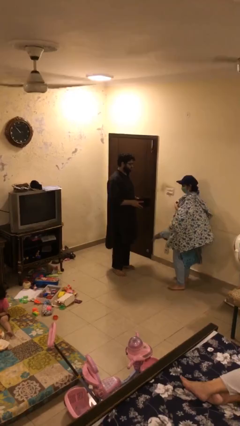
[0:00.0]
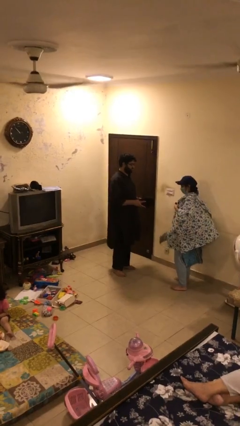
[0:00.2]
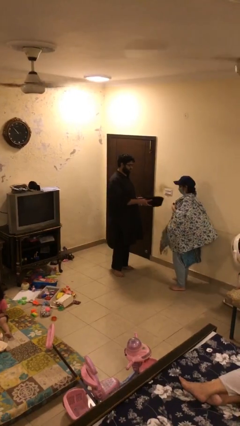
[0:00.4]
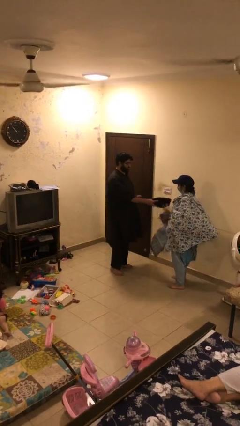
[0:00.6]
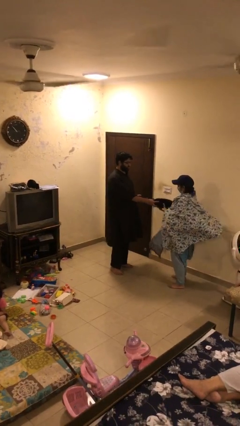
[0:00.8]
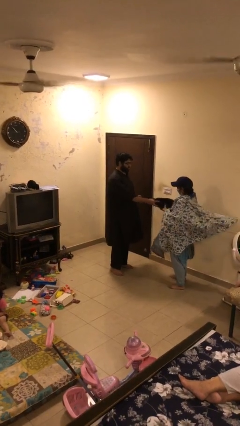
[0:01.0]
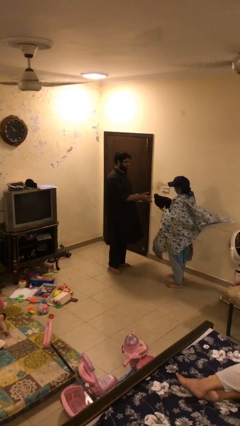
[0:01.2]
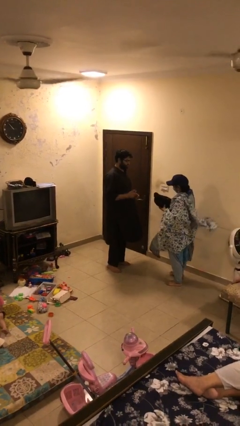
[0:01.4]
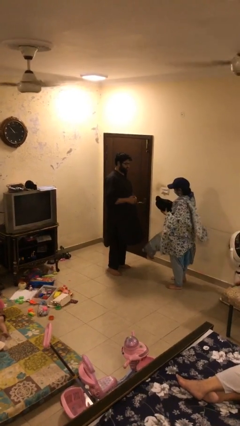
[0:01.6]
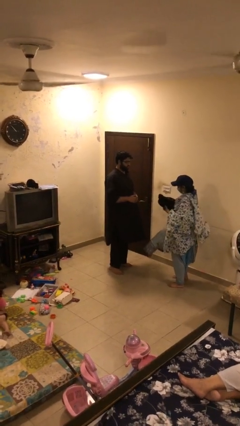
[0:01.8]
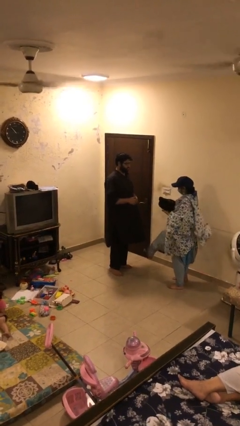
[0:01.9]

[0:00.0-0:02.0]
person transfers object to person

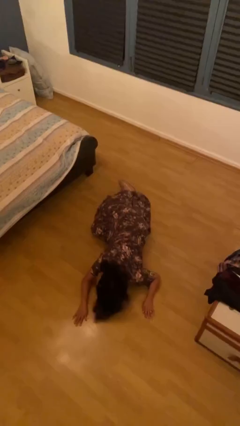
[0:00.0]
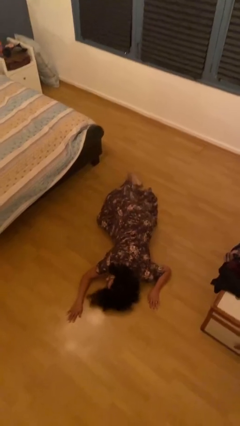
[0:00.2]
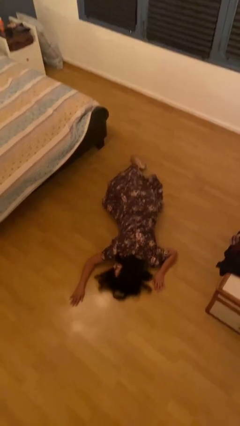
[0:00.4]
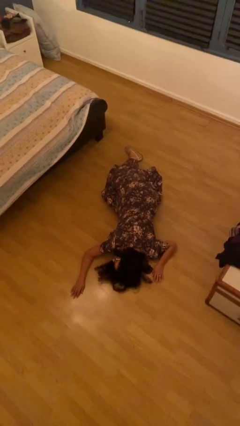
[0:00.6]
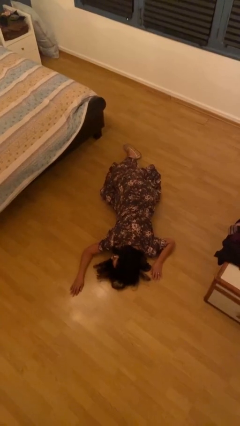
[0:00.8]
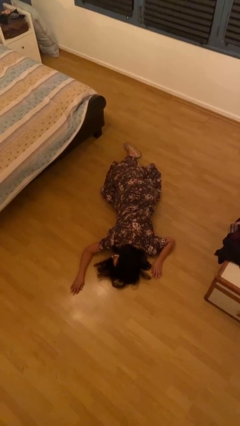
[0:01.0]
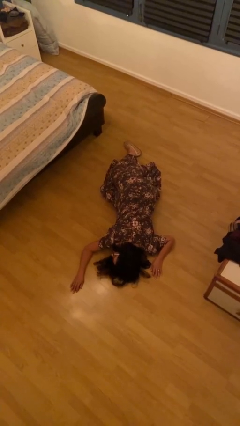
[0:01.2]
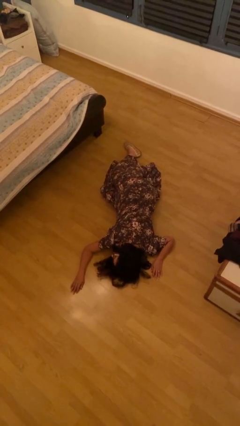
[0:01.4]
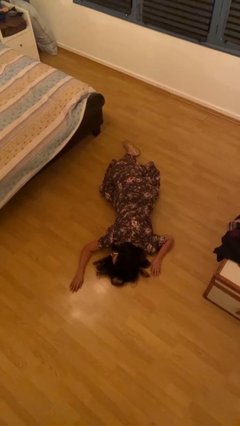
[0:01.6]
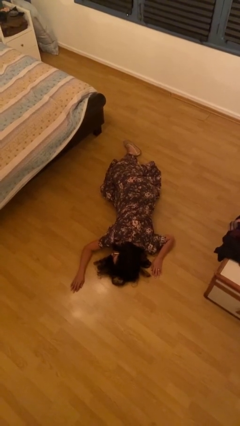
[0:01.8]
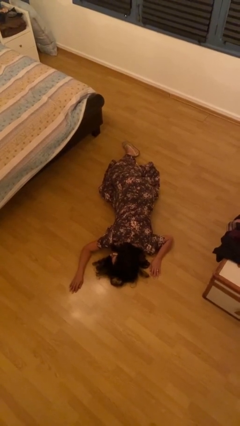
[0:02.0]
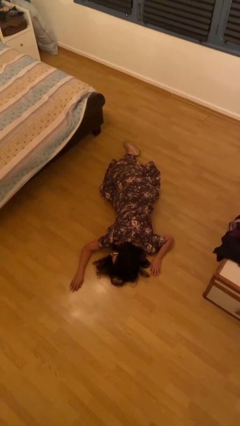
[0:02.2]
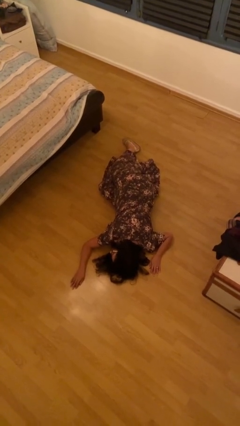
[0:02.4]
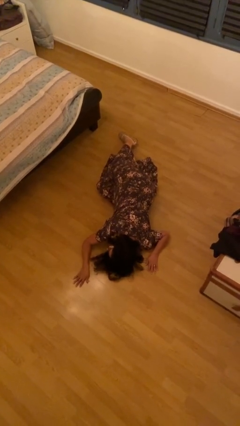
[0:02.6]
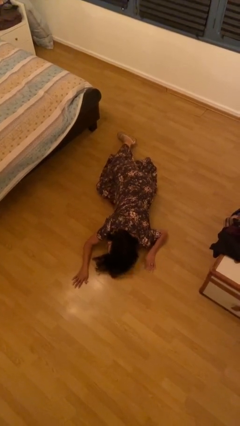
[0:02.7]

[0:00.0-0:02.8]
person lies down on floor

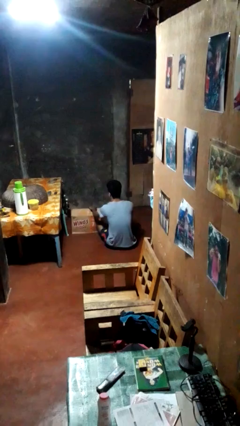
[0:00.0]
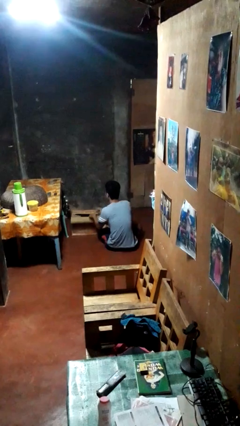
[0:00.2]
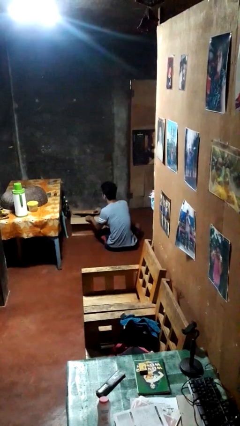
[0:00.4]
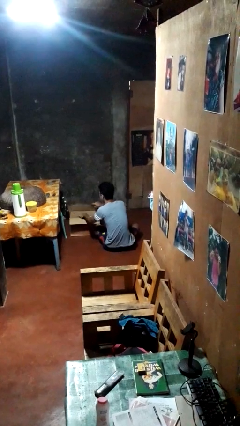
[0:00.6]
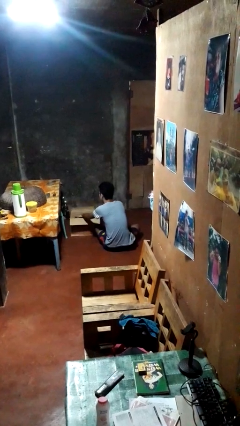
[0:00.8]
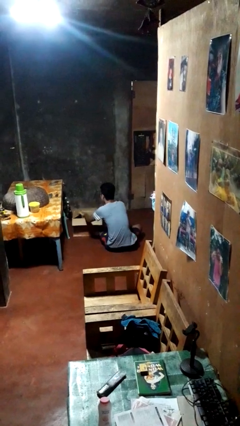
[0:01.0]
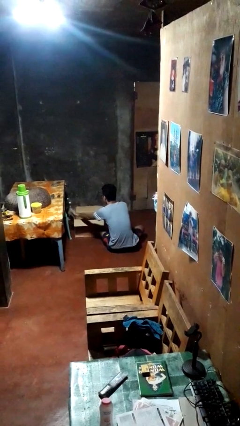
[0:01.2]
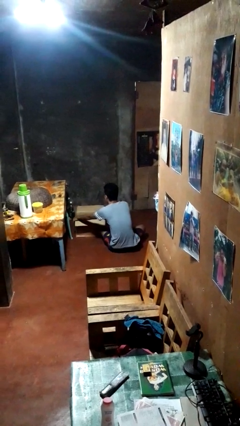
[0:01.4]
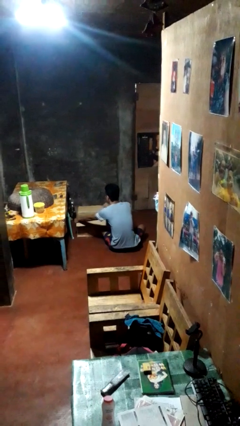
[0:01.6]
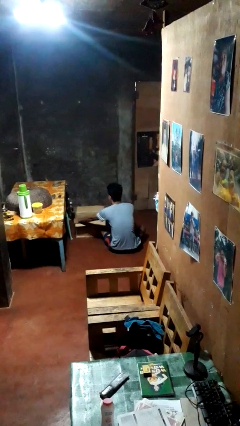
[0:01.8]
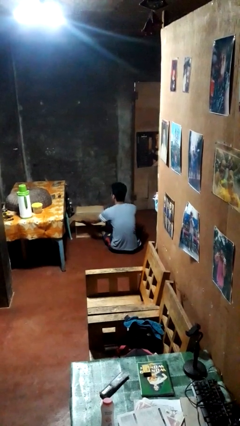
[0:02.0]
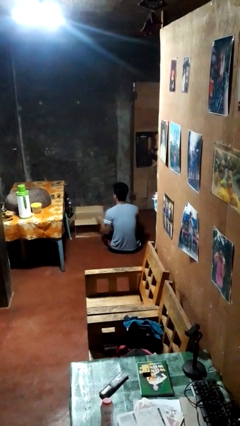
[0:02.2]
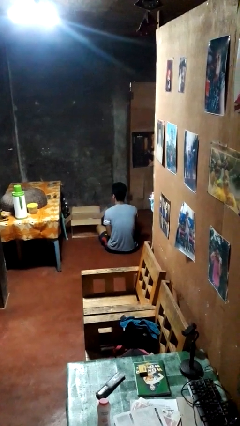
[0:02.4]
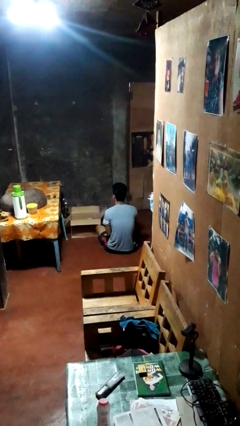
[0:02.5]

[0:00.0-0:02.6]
person opens box

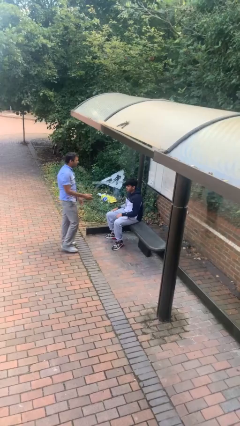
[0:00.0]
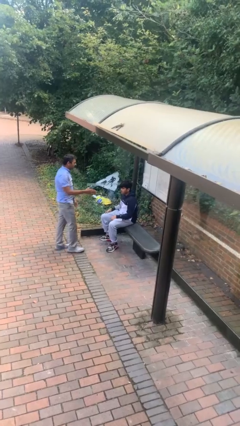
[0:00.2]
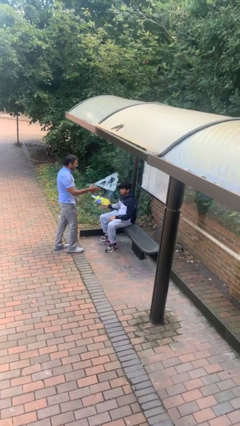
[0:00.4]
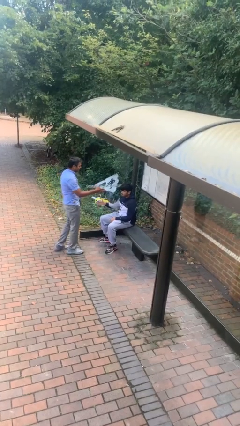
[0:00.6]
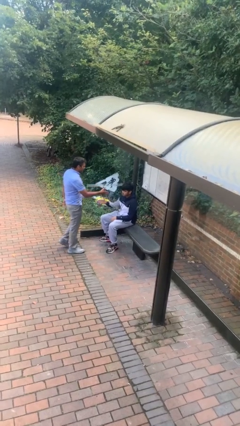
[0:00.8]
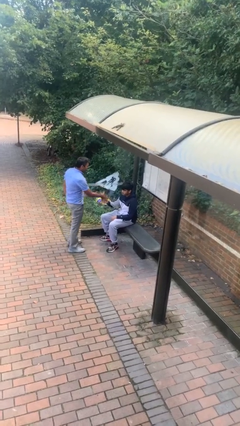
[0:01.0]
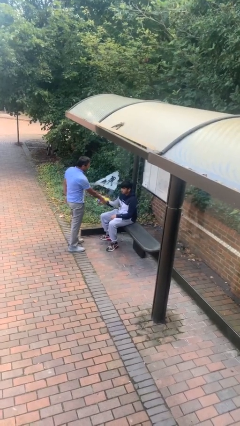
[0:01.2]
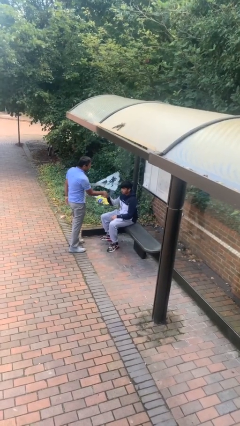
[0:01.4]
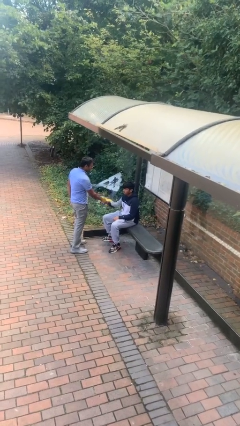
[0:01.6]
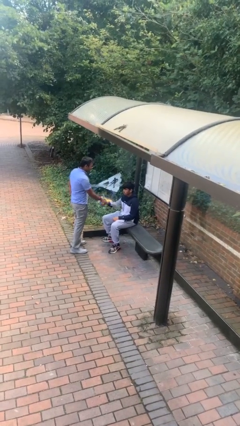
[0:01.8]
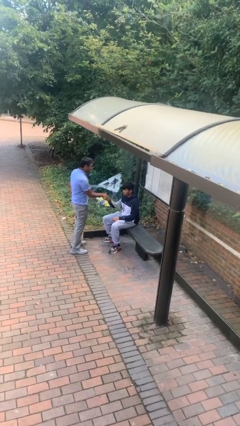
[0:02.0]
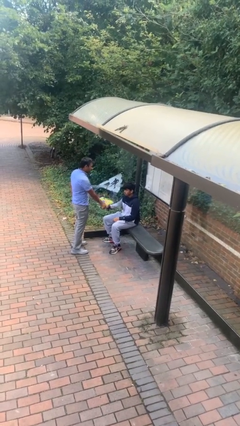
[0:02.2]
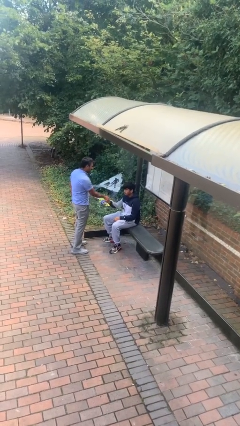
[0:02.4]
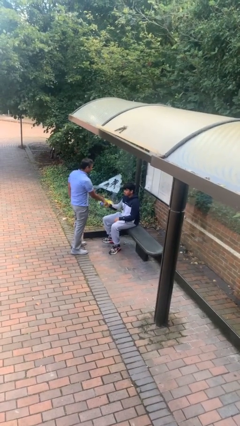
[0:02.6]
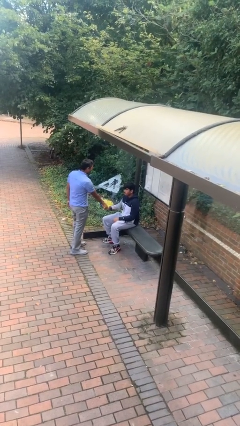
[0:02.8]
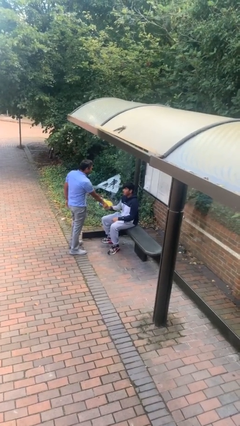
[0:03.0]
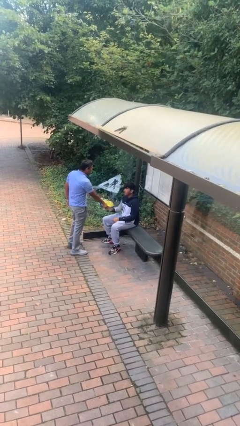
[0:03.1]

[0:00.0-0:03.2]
person shakes hand

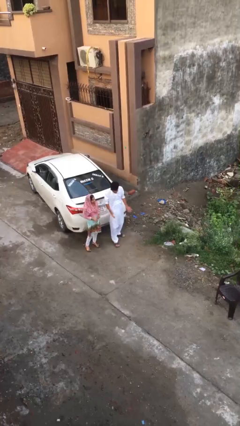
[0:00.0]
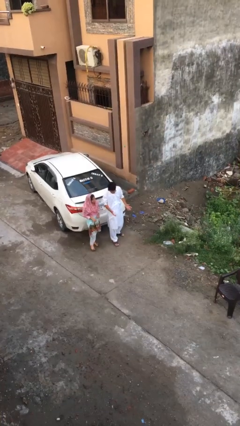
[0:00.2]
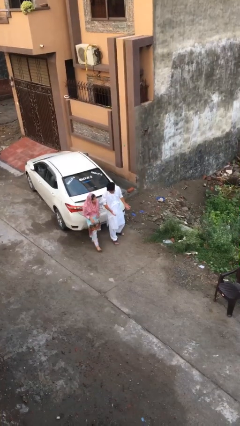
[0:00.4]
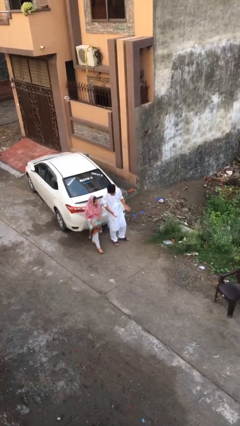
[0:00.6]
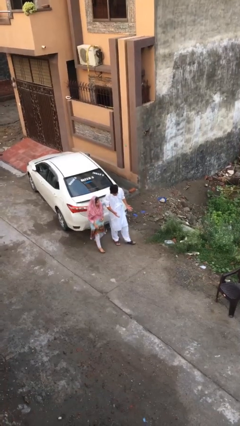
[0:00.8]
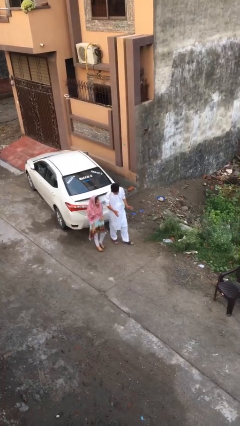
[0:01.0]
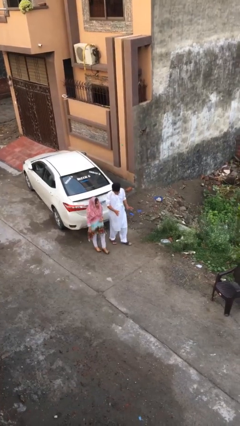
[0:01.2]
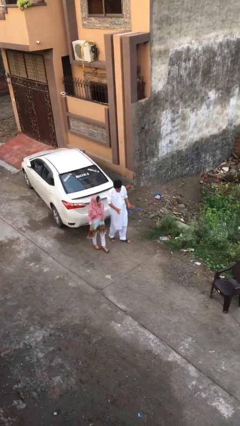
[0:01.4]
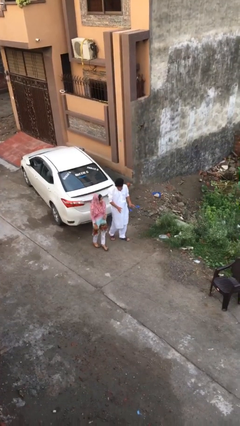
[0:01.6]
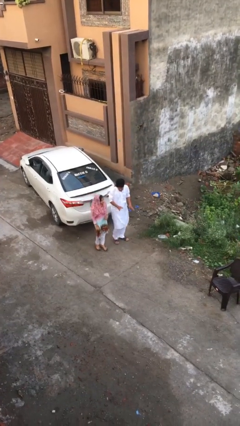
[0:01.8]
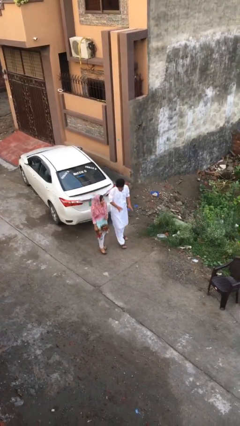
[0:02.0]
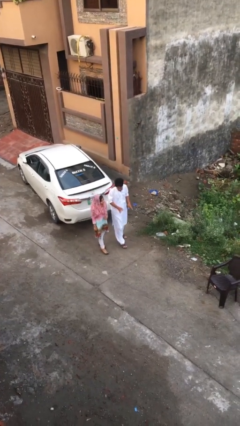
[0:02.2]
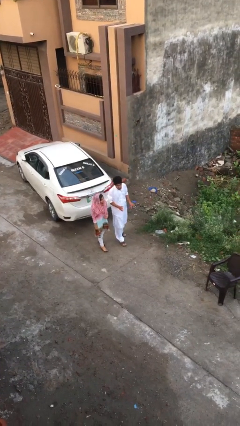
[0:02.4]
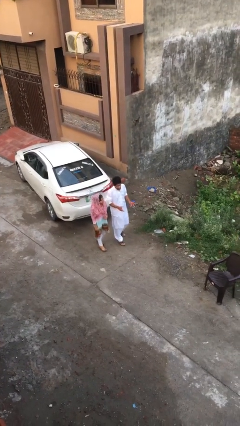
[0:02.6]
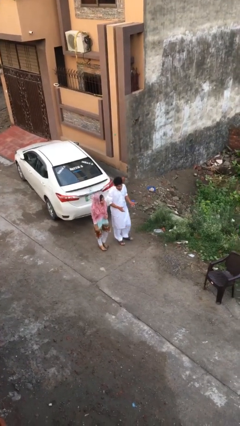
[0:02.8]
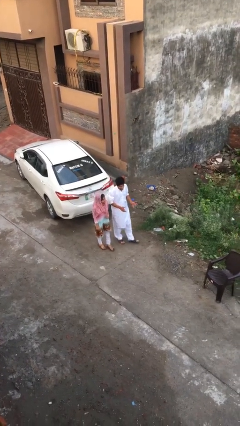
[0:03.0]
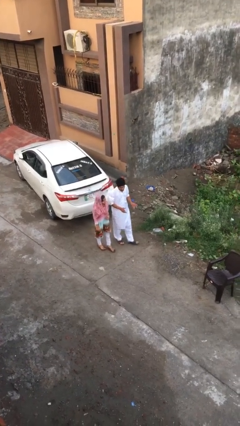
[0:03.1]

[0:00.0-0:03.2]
person talks to person

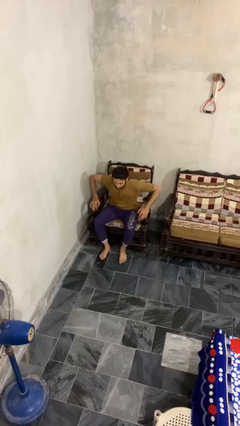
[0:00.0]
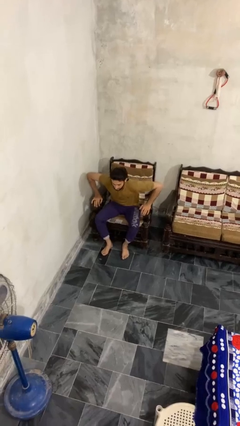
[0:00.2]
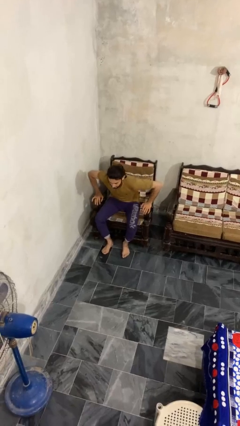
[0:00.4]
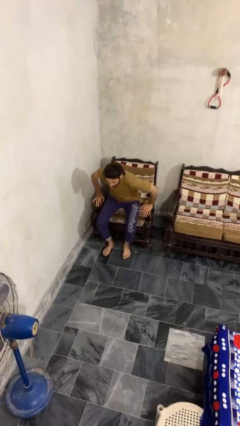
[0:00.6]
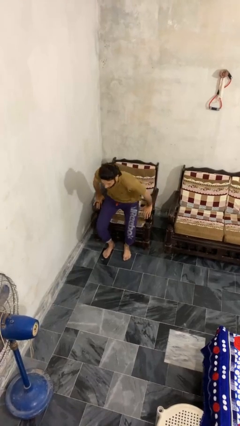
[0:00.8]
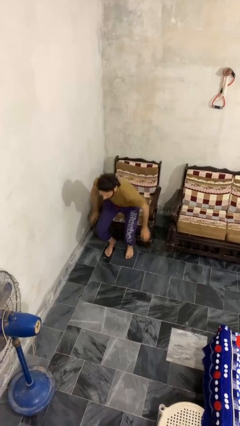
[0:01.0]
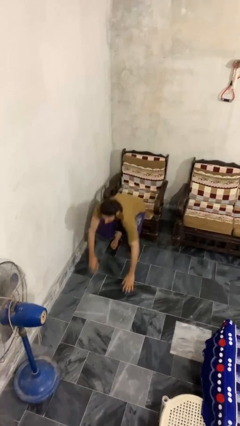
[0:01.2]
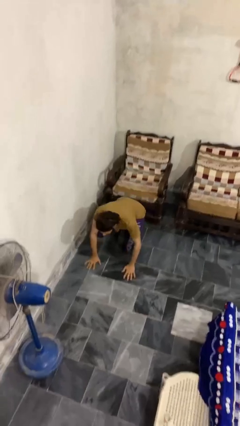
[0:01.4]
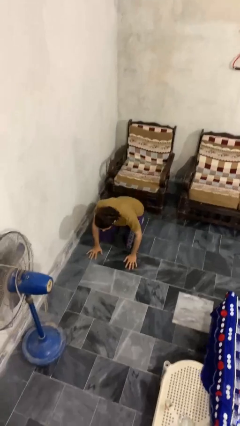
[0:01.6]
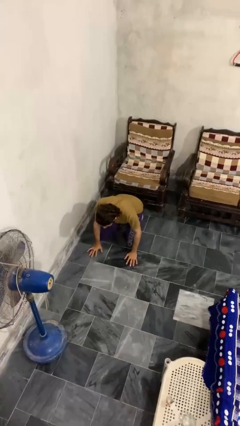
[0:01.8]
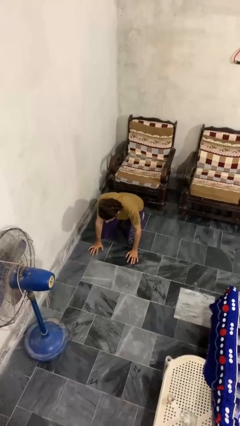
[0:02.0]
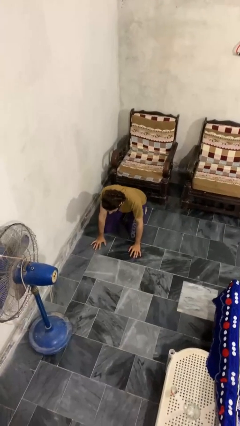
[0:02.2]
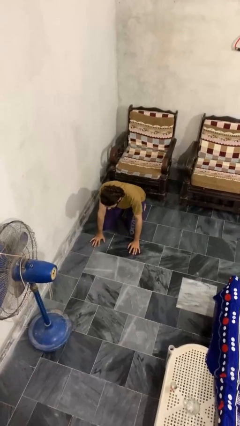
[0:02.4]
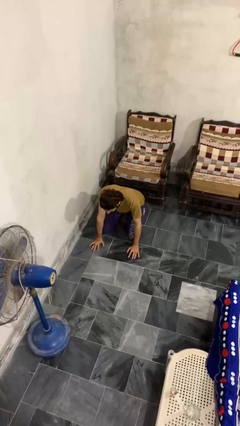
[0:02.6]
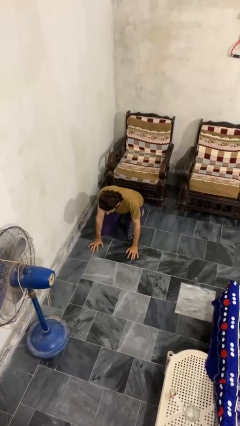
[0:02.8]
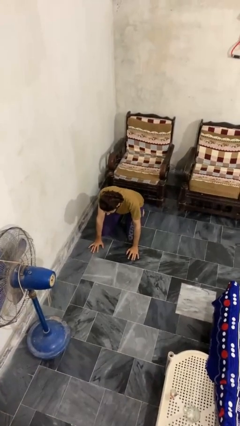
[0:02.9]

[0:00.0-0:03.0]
person falls from chair
